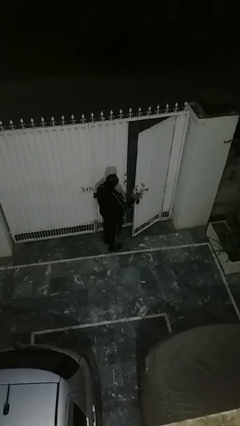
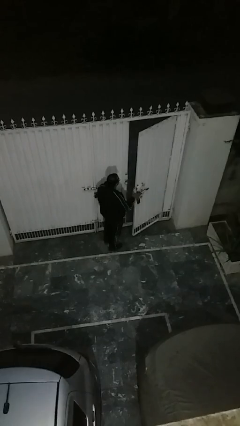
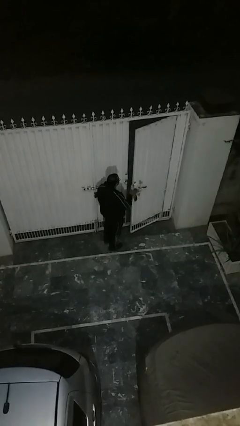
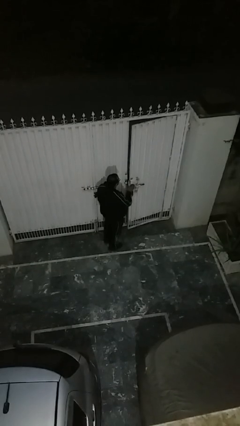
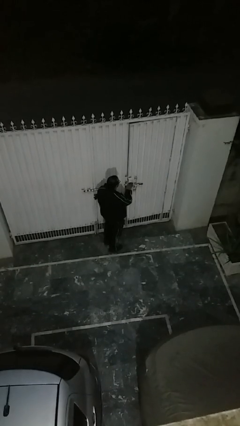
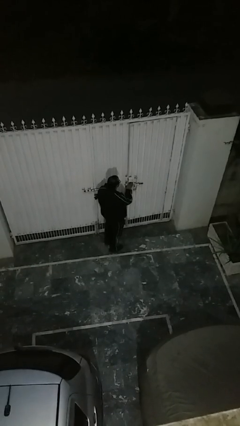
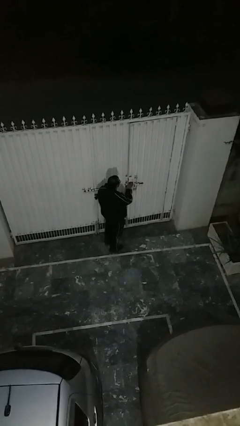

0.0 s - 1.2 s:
person closes facility door

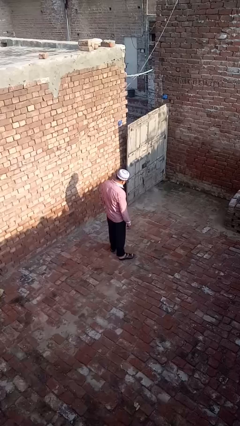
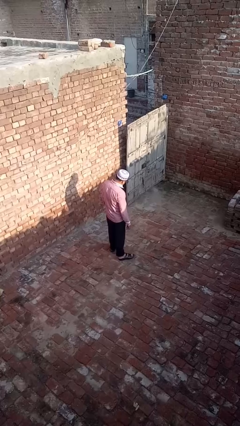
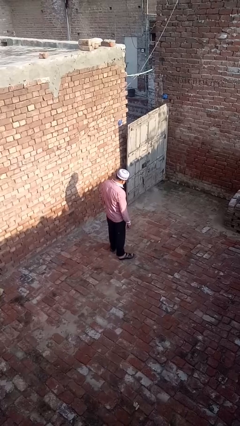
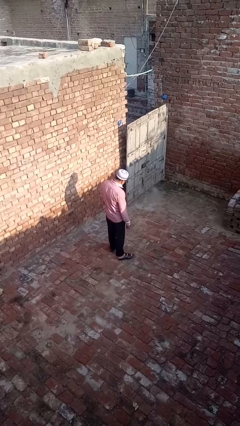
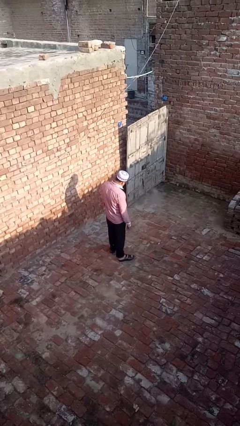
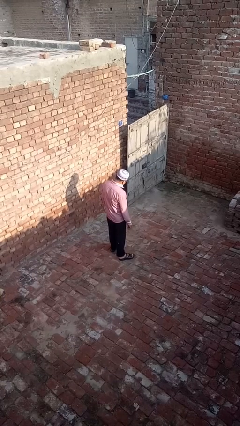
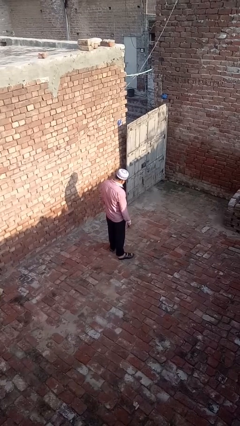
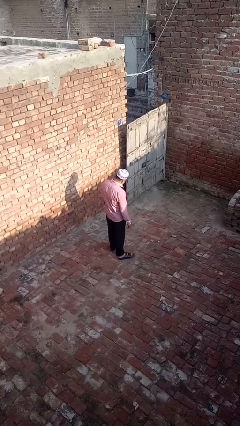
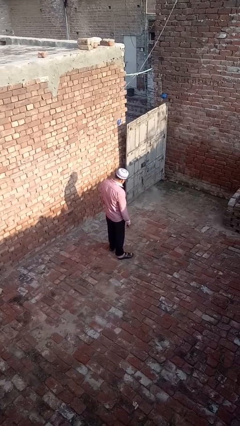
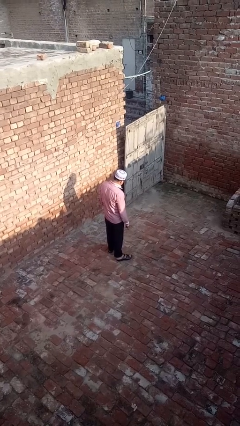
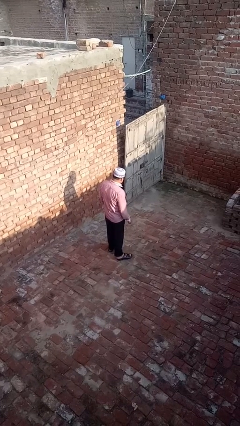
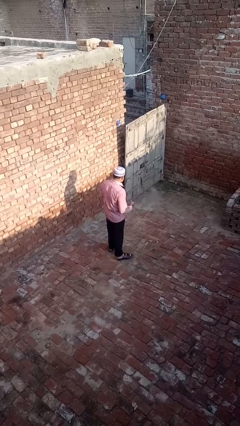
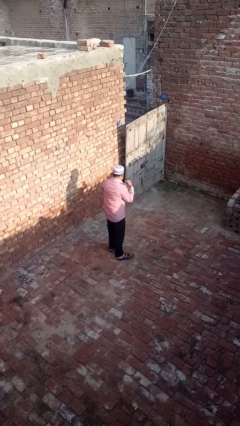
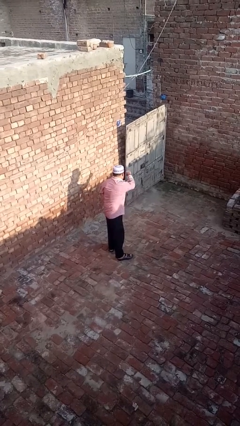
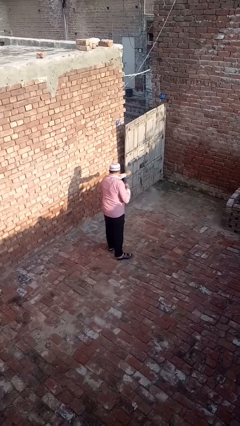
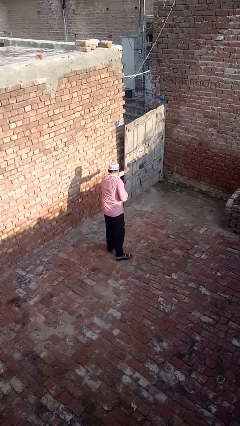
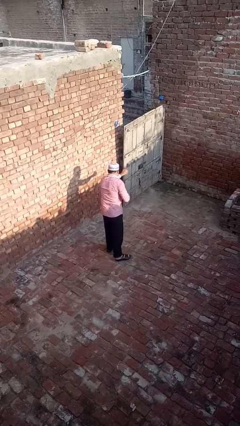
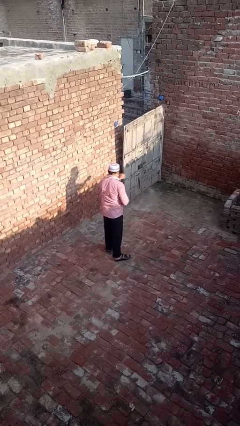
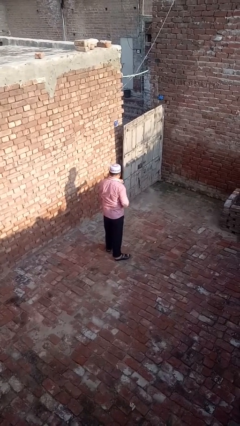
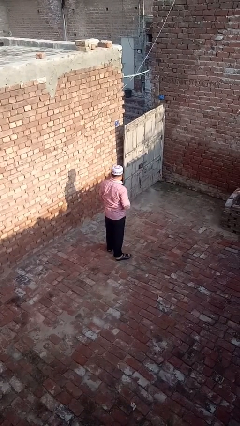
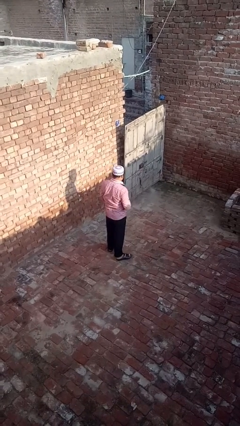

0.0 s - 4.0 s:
person punches

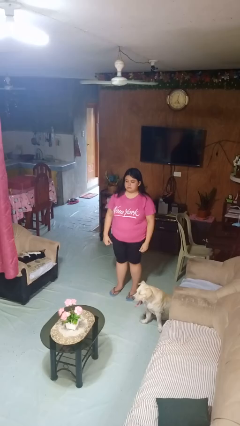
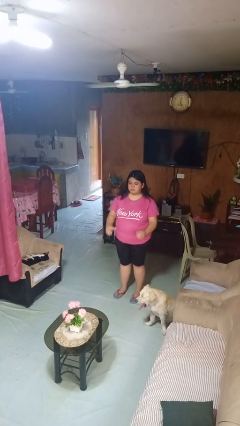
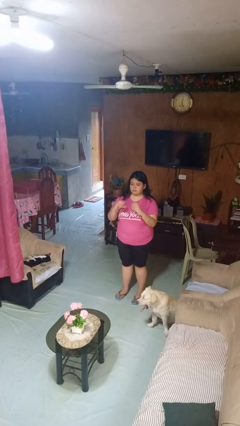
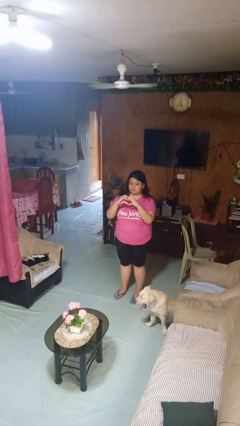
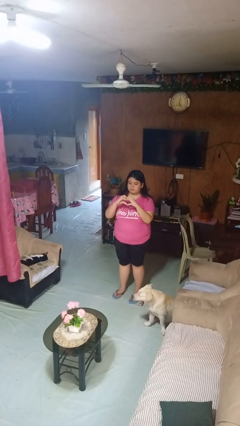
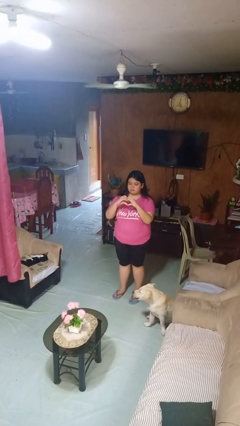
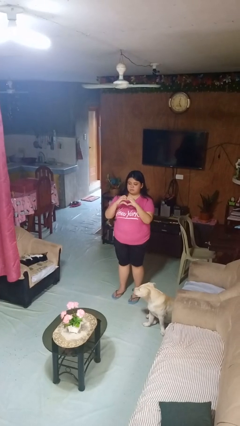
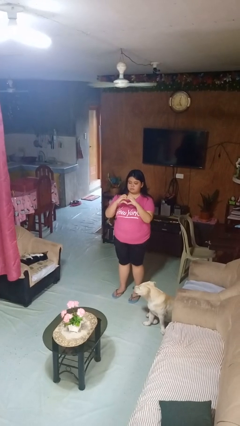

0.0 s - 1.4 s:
person gestures heart

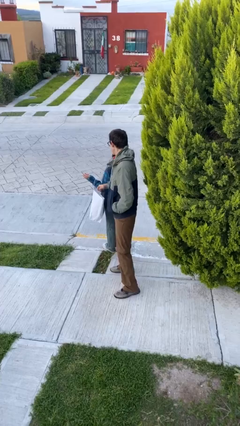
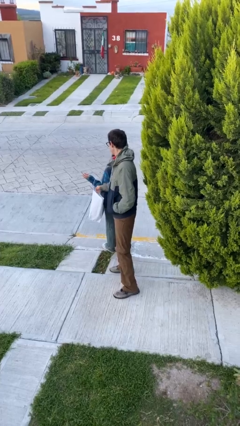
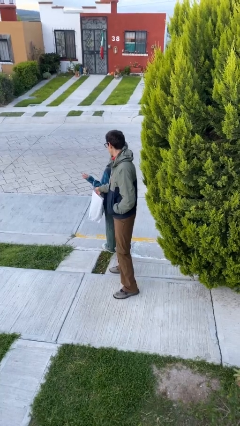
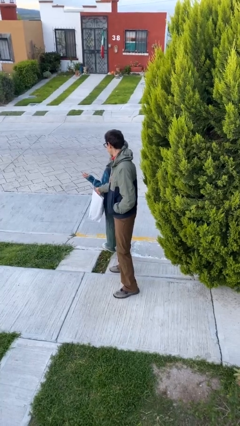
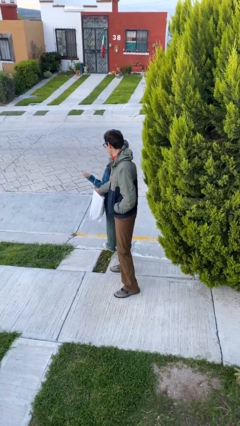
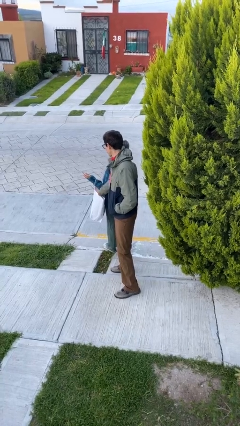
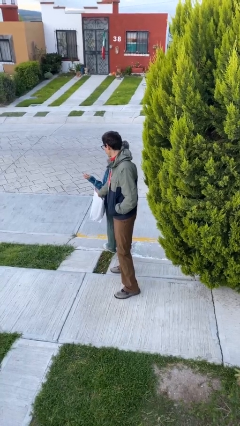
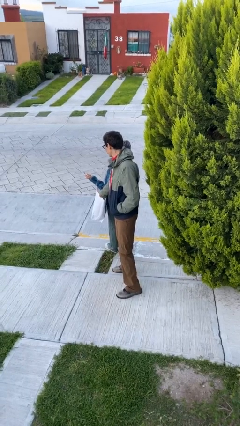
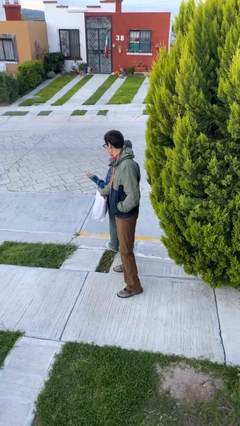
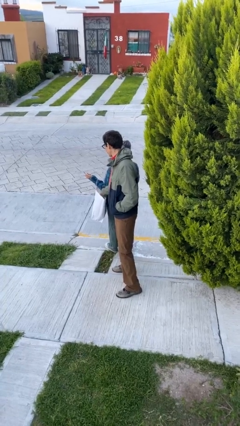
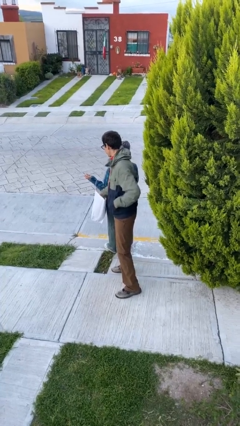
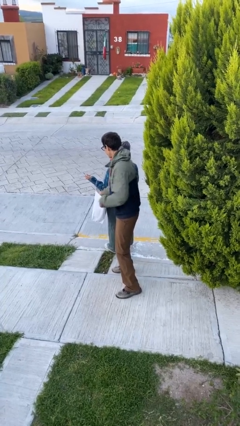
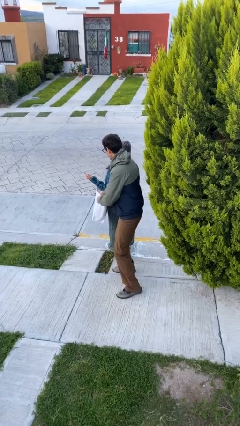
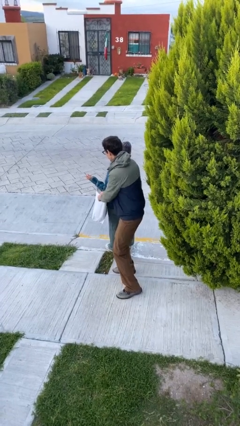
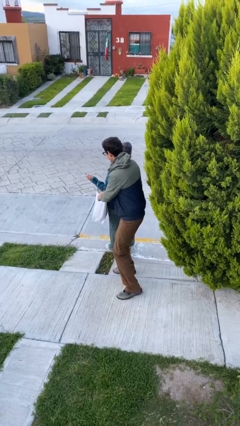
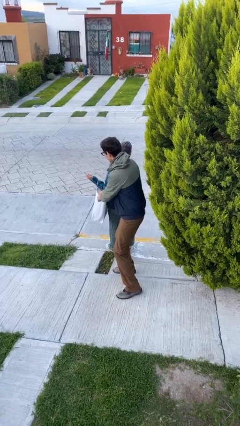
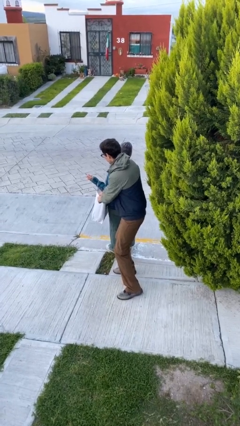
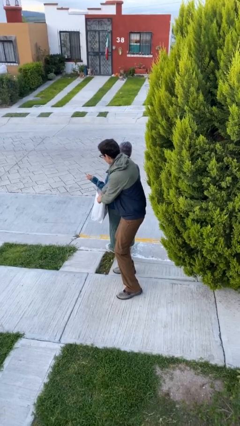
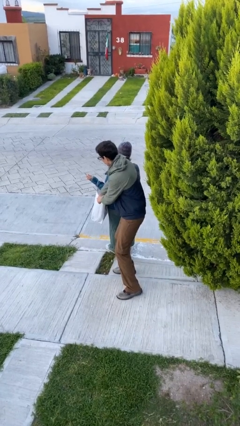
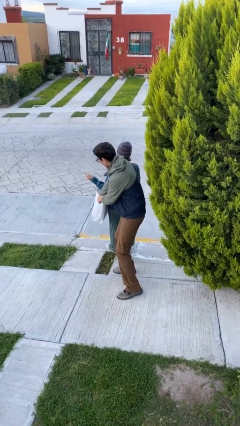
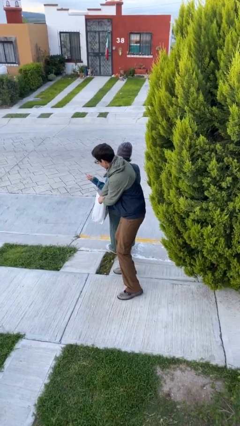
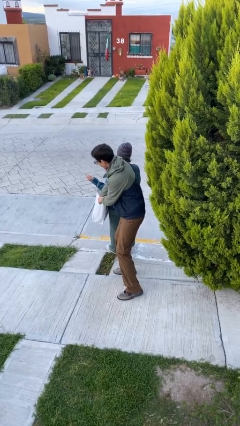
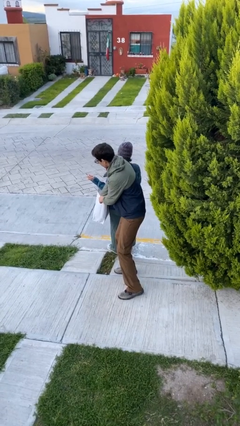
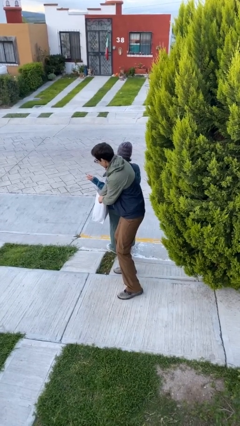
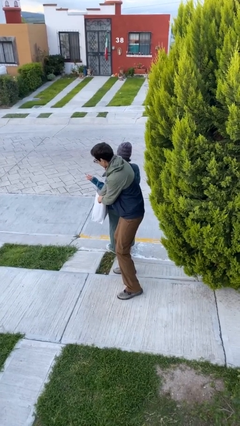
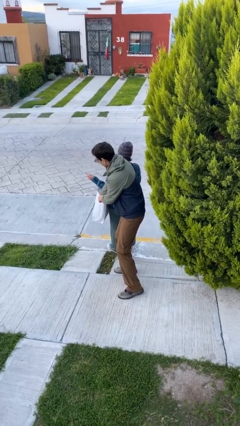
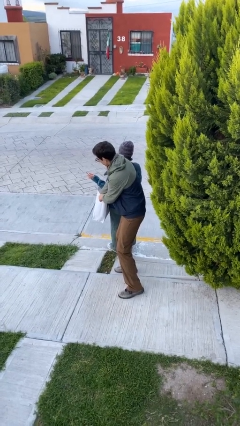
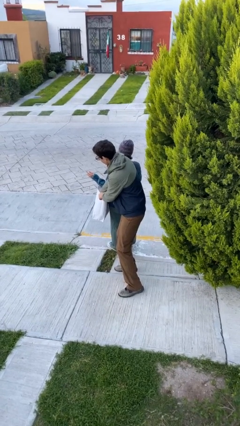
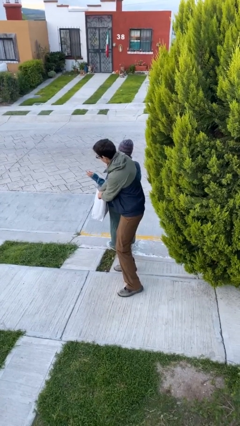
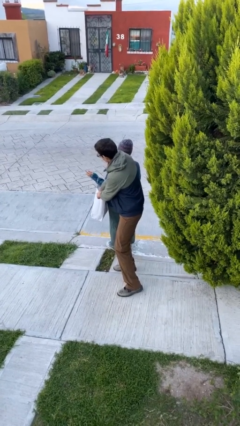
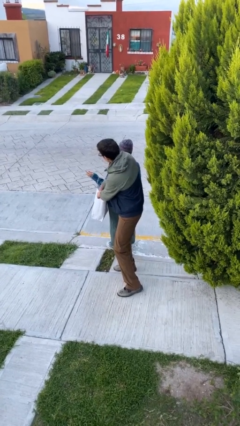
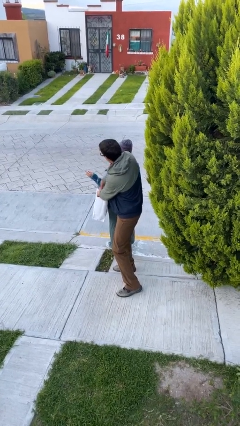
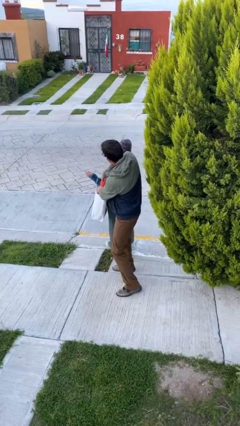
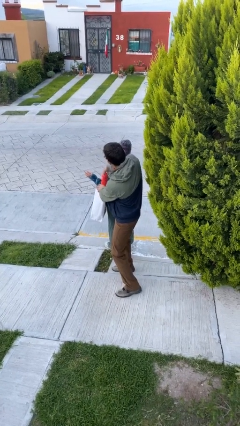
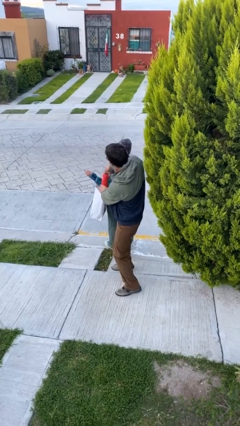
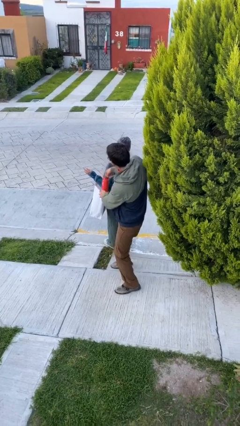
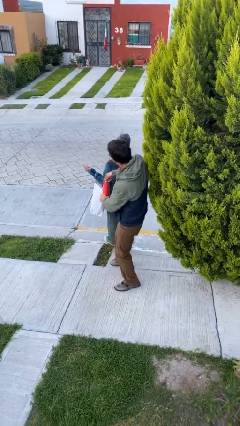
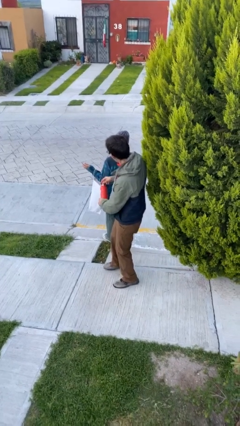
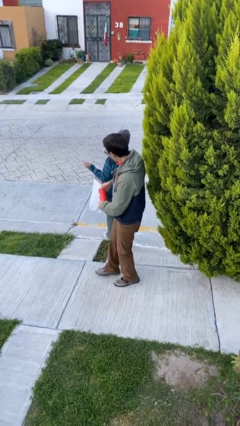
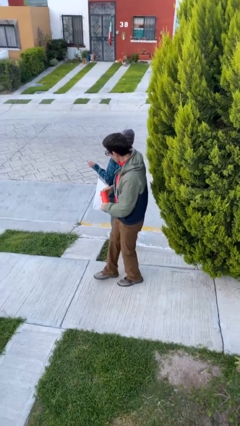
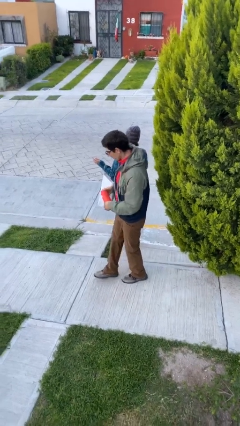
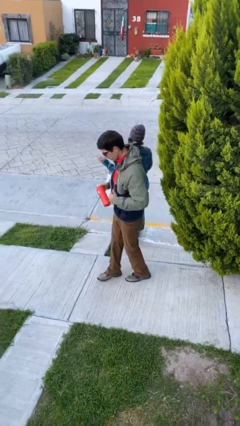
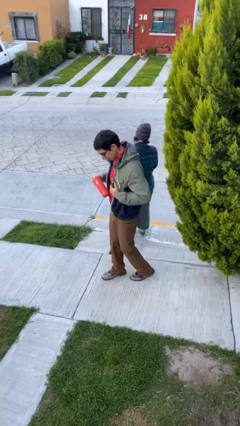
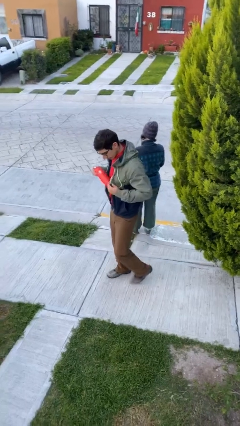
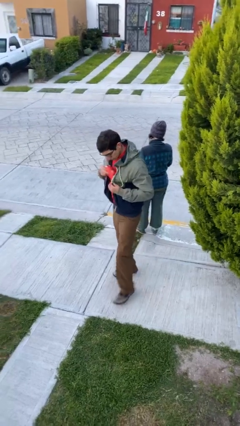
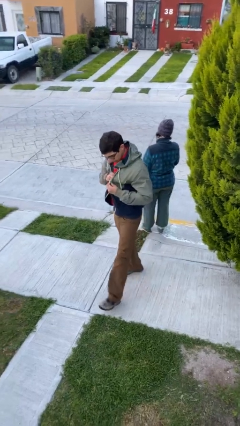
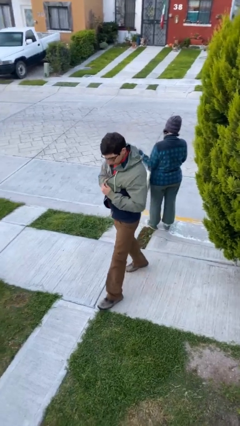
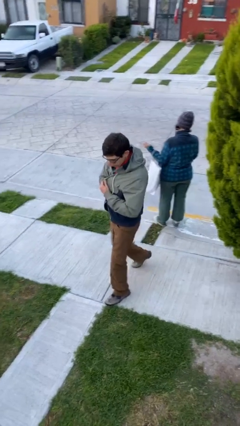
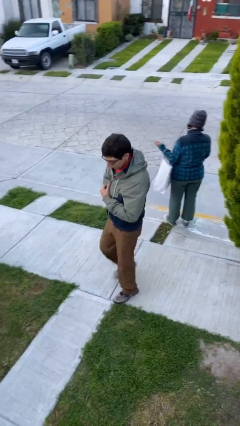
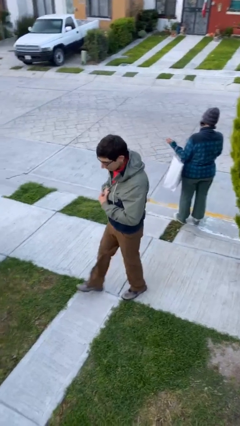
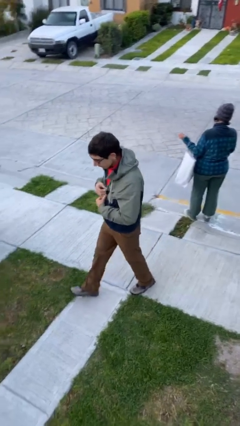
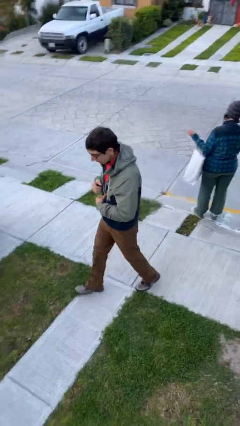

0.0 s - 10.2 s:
person steals object from person

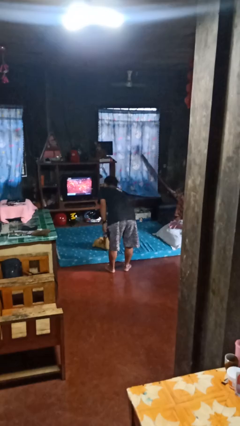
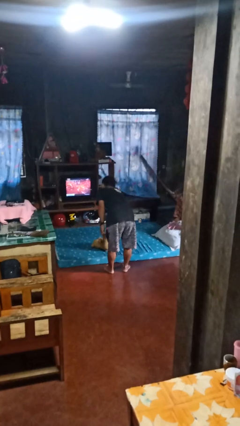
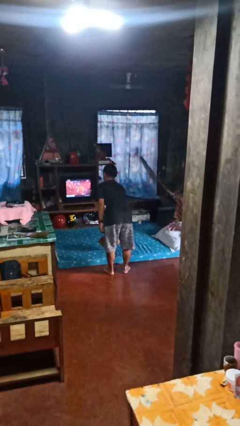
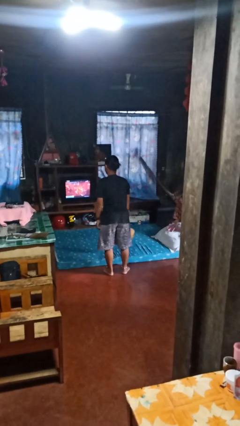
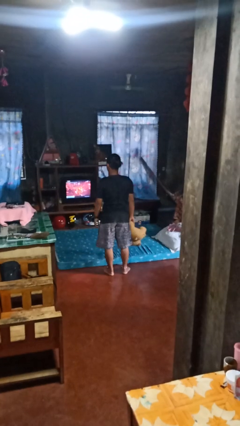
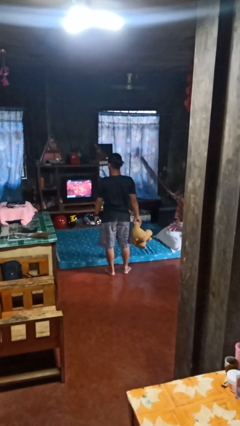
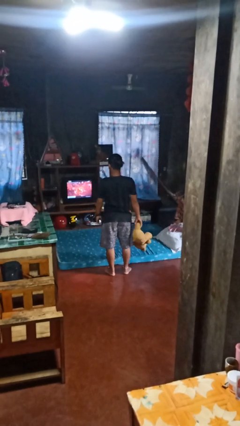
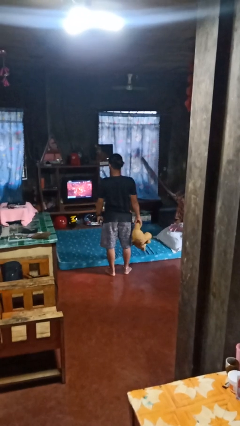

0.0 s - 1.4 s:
person picks up object from bed
